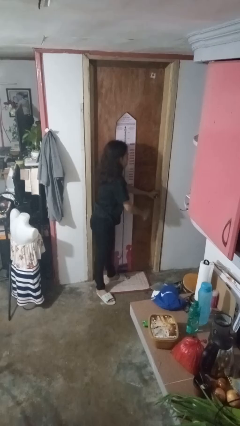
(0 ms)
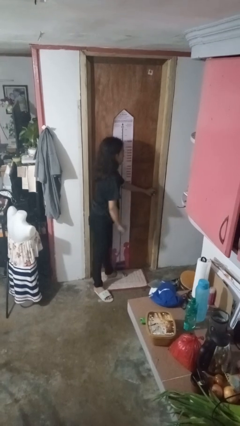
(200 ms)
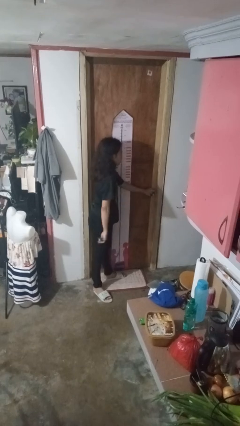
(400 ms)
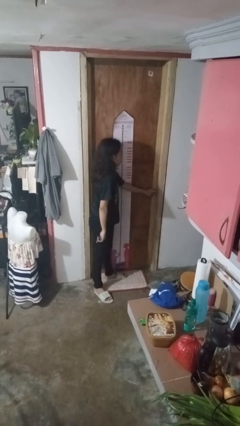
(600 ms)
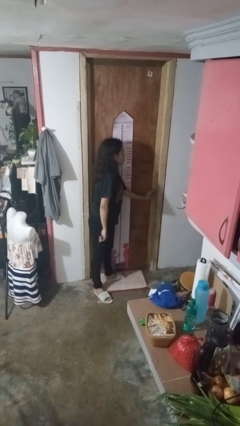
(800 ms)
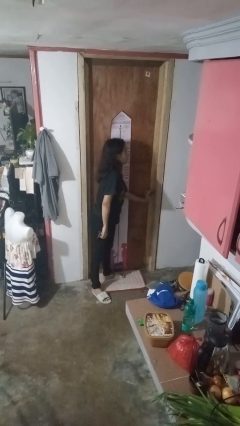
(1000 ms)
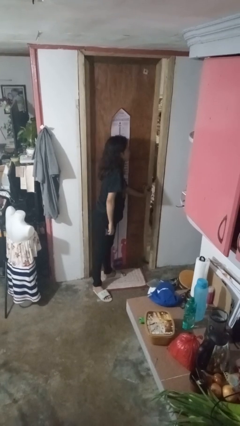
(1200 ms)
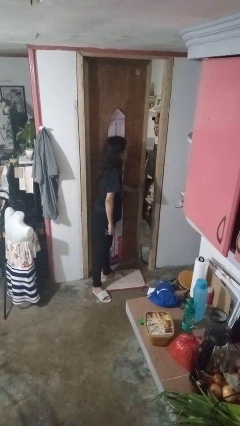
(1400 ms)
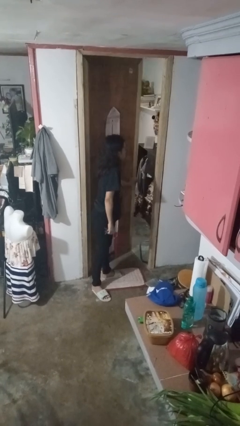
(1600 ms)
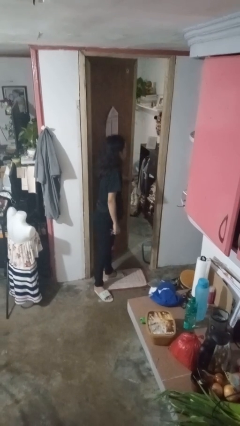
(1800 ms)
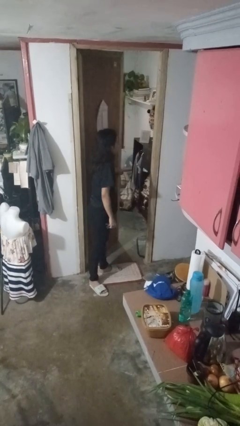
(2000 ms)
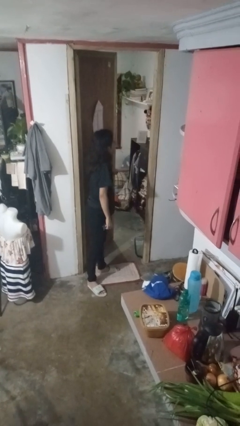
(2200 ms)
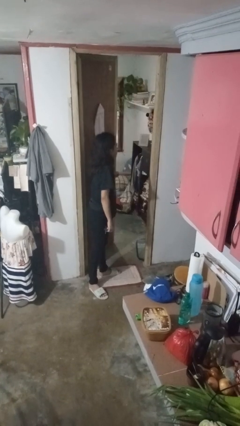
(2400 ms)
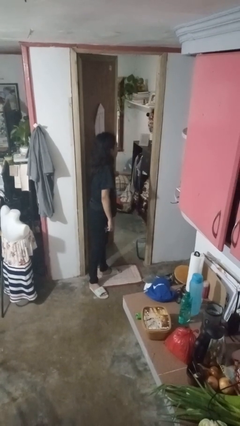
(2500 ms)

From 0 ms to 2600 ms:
person opens facility door

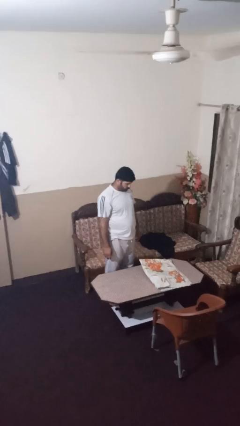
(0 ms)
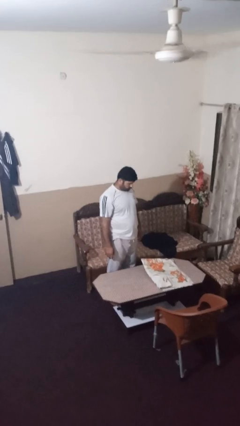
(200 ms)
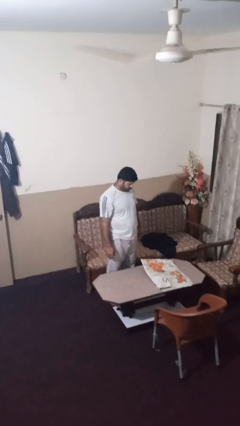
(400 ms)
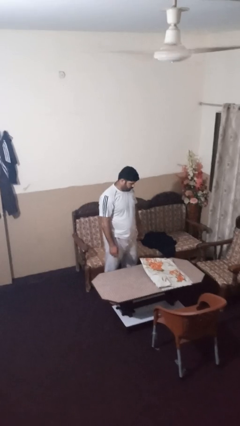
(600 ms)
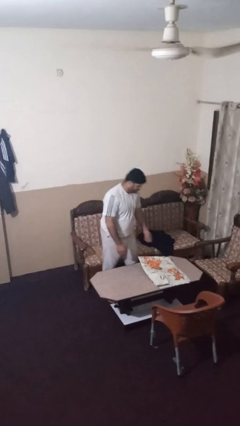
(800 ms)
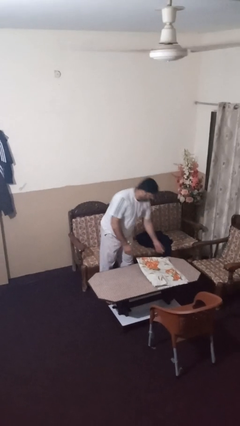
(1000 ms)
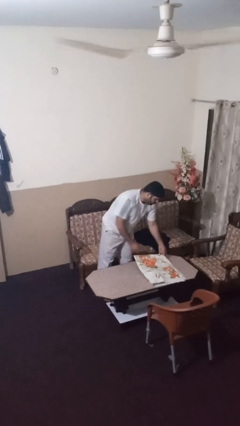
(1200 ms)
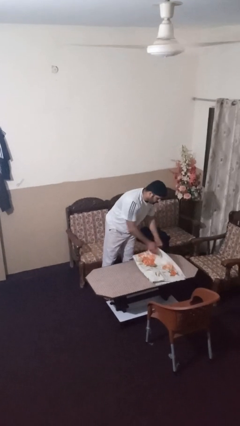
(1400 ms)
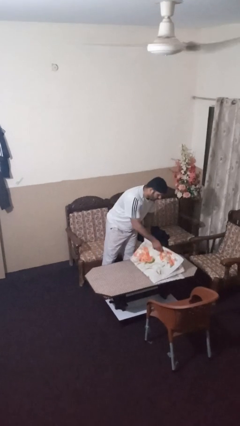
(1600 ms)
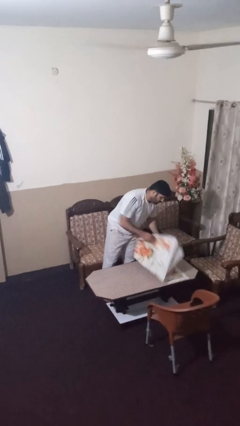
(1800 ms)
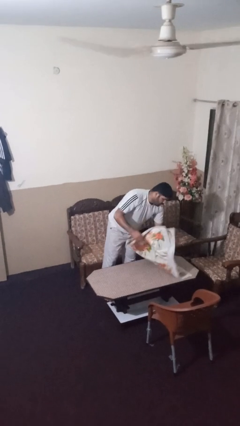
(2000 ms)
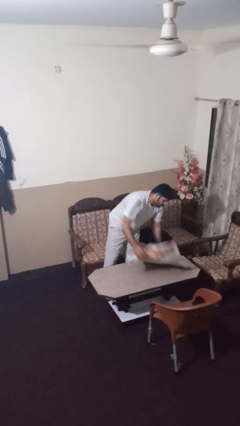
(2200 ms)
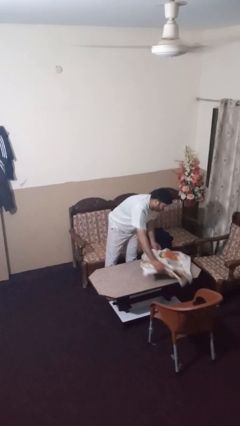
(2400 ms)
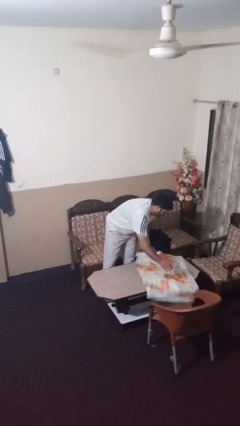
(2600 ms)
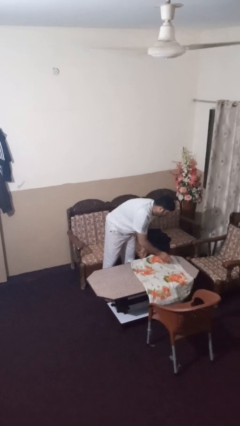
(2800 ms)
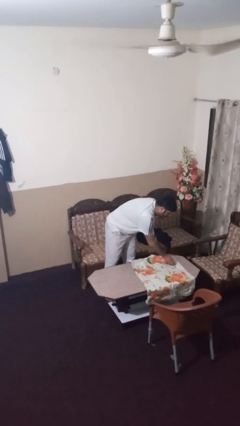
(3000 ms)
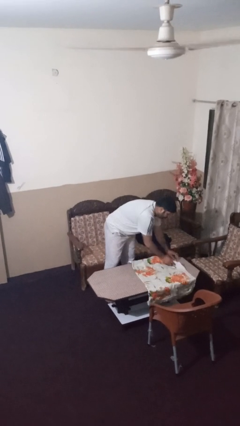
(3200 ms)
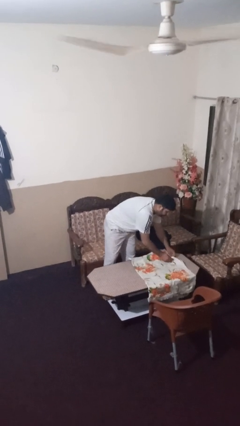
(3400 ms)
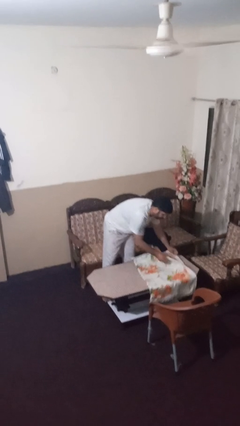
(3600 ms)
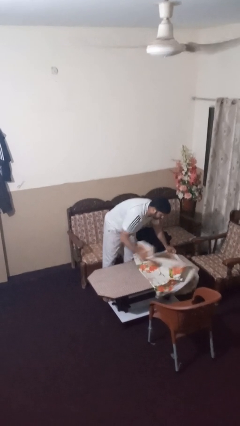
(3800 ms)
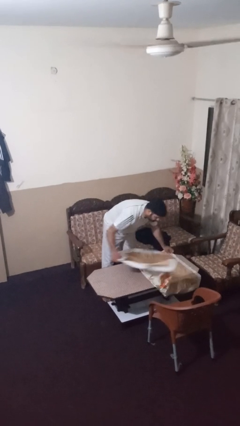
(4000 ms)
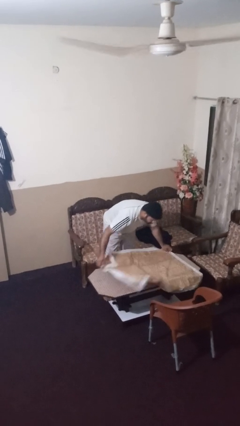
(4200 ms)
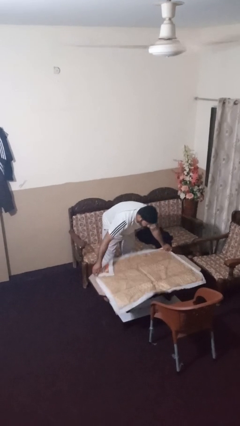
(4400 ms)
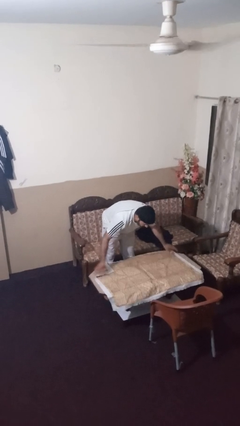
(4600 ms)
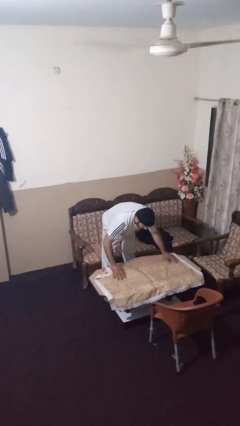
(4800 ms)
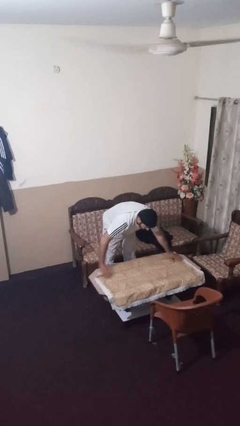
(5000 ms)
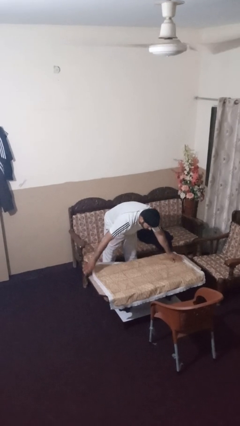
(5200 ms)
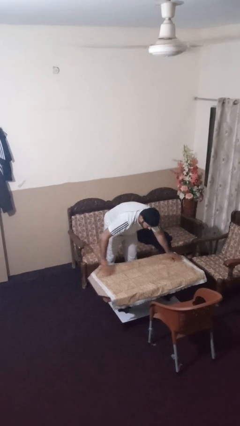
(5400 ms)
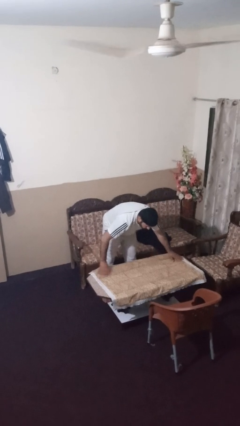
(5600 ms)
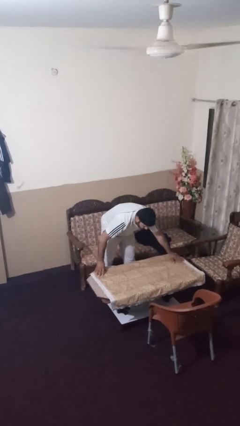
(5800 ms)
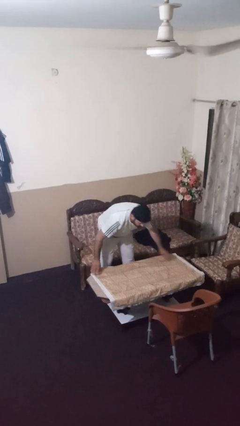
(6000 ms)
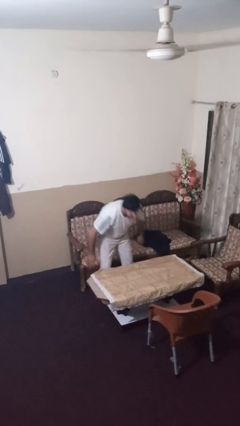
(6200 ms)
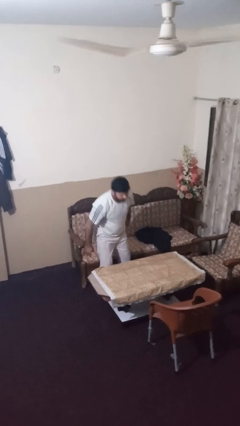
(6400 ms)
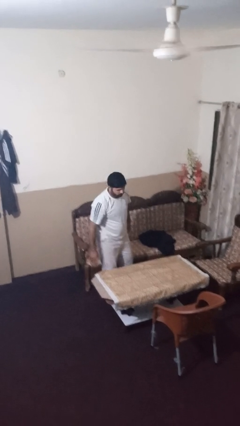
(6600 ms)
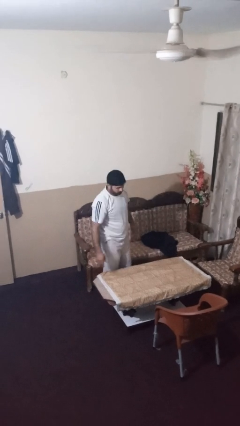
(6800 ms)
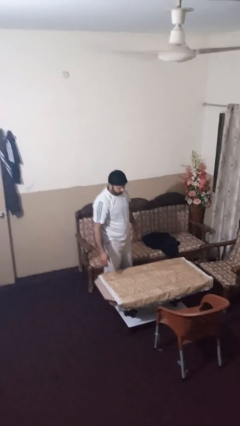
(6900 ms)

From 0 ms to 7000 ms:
person spreads tablecloth

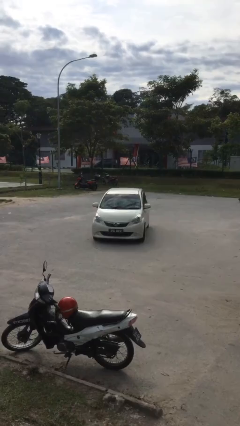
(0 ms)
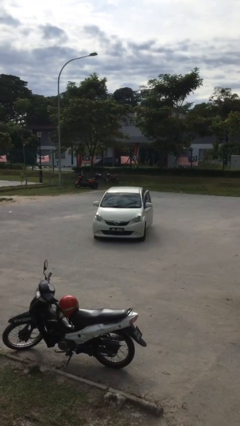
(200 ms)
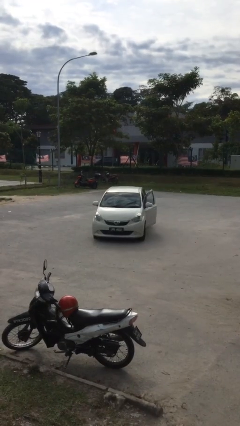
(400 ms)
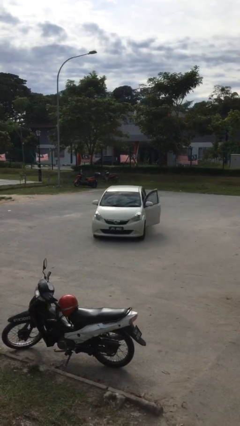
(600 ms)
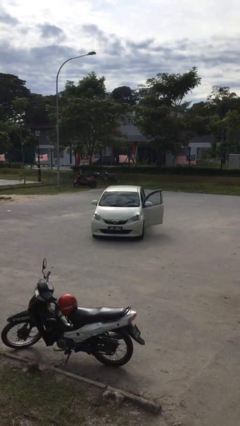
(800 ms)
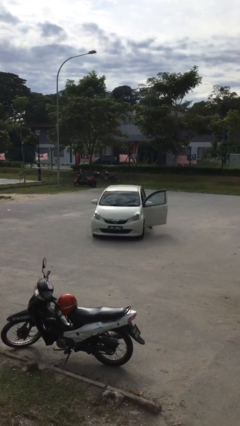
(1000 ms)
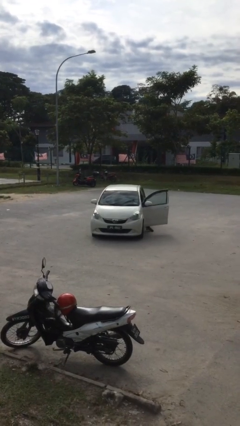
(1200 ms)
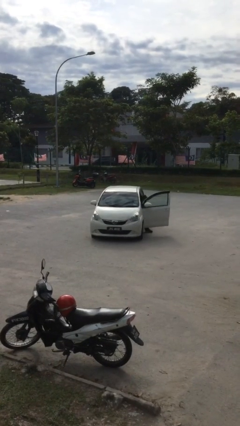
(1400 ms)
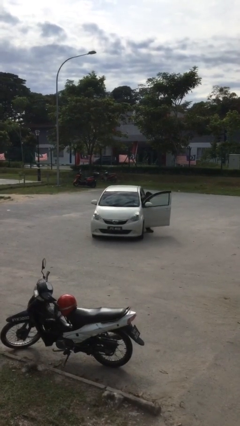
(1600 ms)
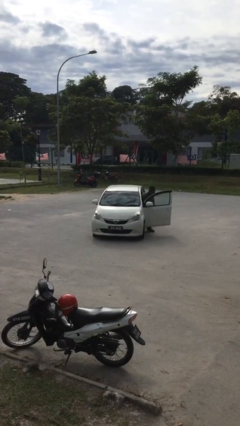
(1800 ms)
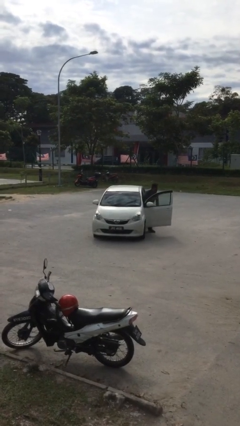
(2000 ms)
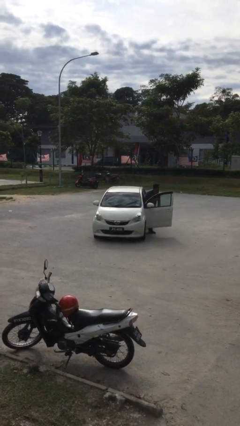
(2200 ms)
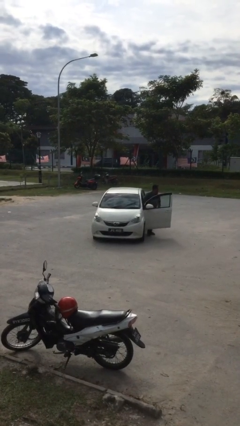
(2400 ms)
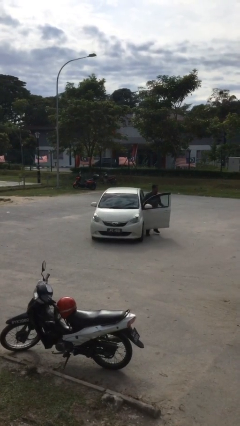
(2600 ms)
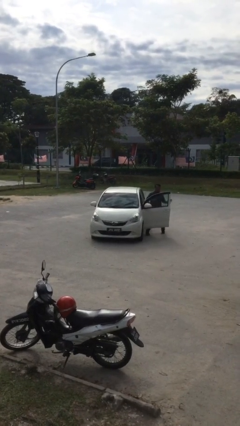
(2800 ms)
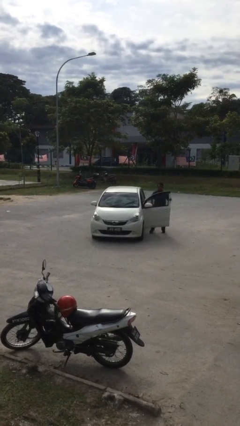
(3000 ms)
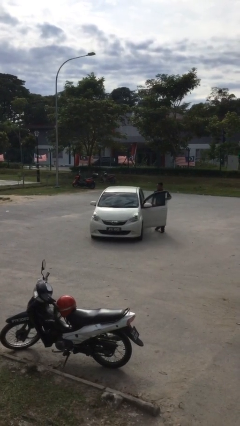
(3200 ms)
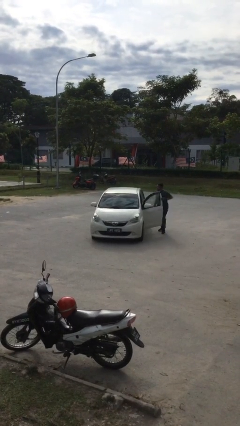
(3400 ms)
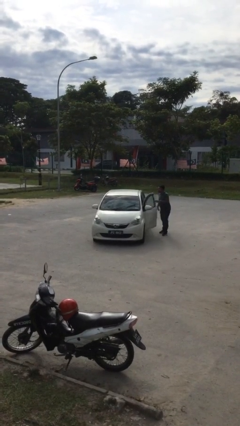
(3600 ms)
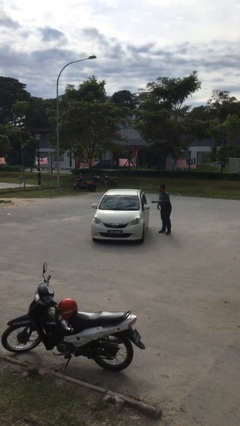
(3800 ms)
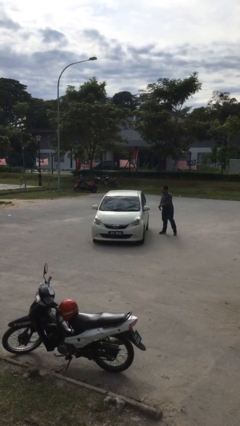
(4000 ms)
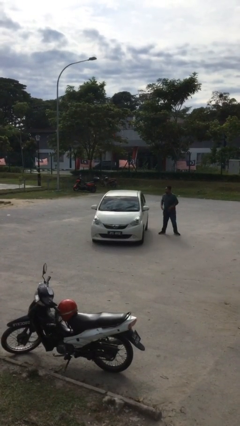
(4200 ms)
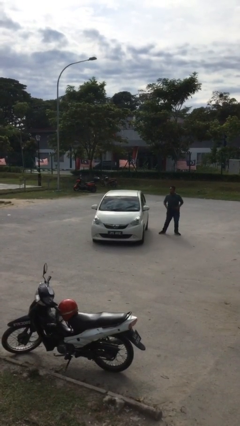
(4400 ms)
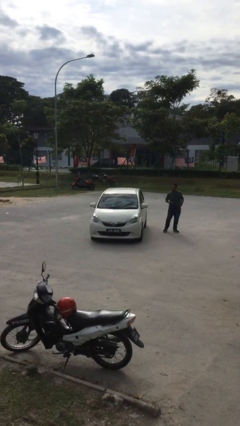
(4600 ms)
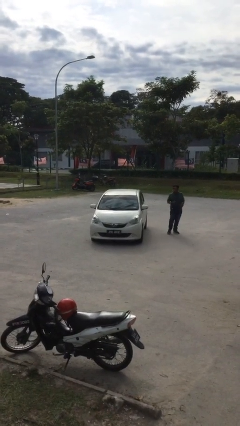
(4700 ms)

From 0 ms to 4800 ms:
car drops off person

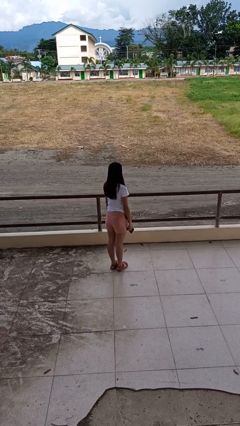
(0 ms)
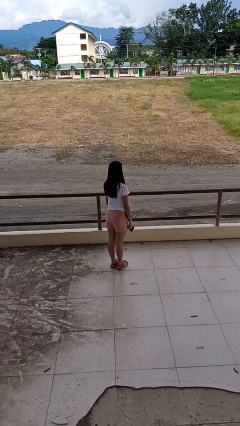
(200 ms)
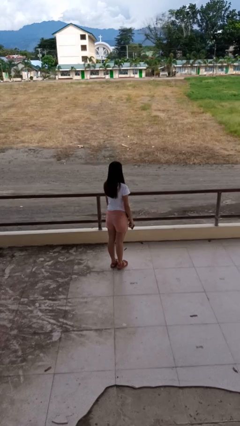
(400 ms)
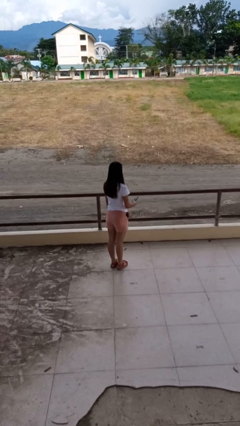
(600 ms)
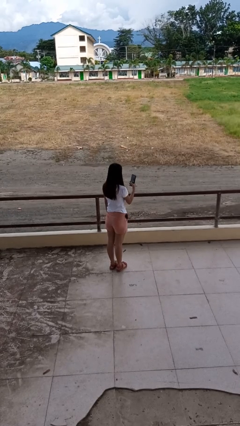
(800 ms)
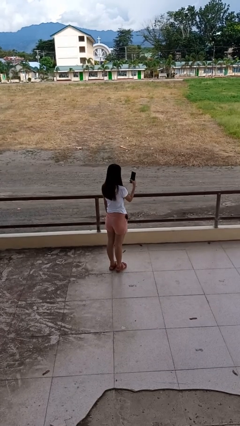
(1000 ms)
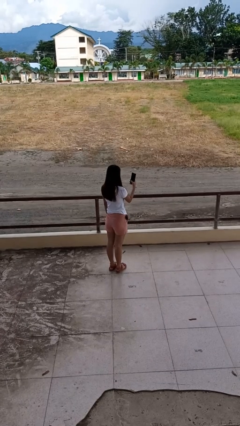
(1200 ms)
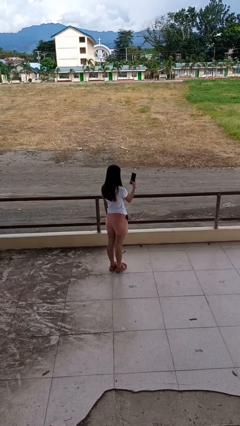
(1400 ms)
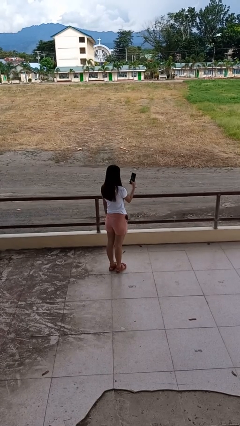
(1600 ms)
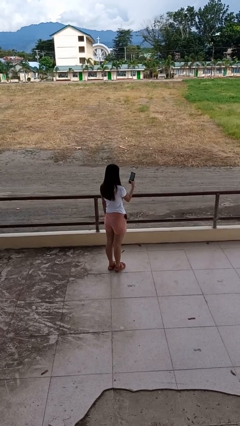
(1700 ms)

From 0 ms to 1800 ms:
person takes selfie

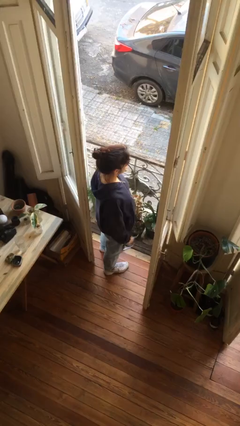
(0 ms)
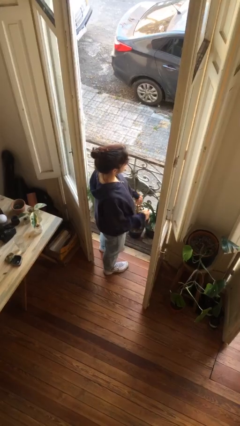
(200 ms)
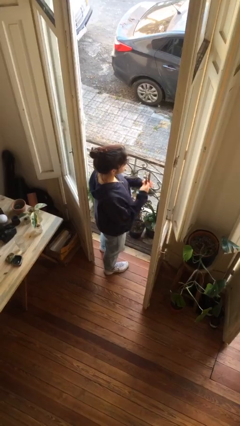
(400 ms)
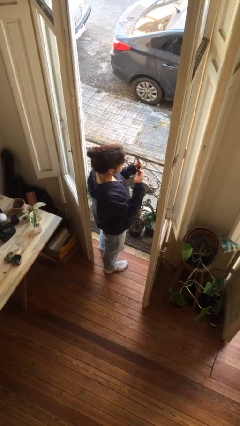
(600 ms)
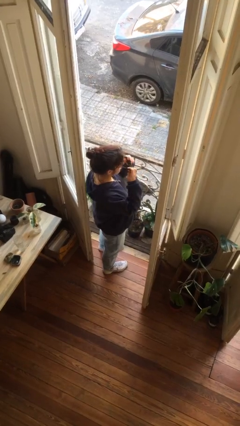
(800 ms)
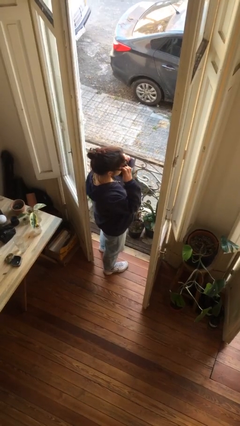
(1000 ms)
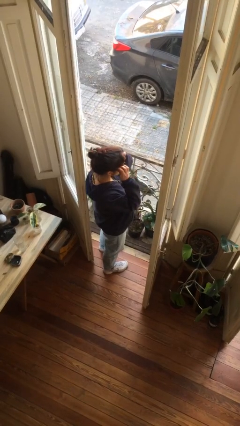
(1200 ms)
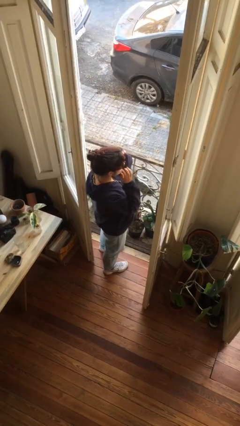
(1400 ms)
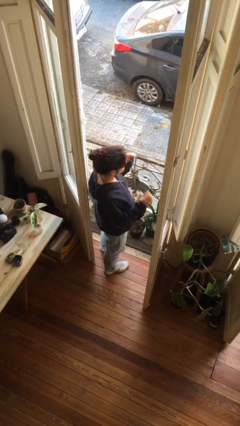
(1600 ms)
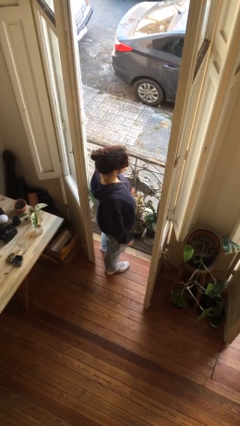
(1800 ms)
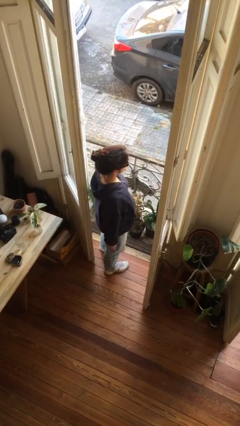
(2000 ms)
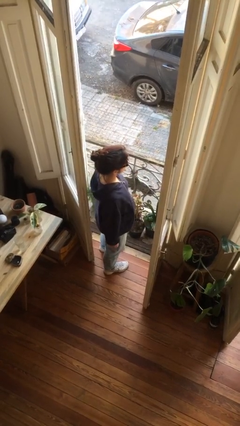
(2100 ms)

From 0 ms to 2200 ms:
person puts on sunglasses
